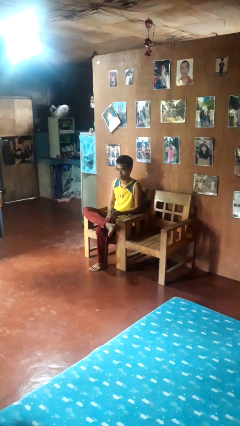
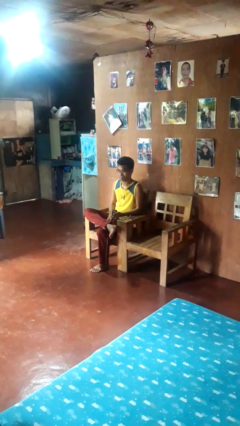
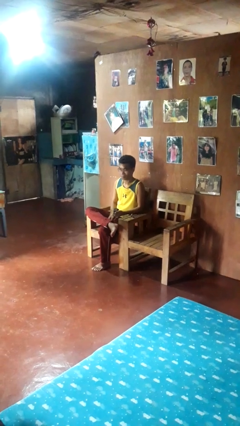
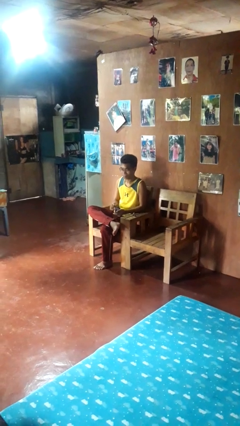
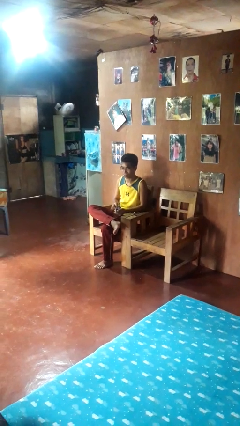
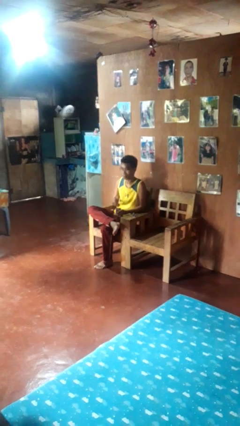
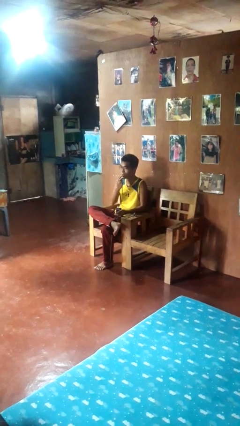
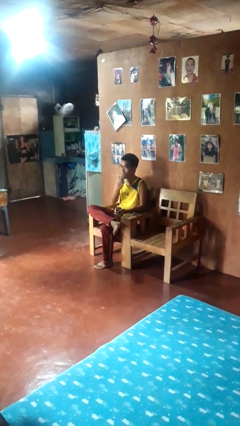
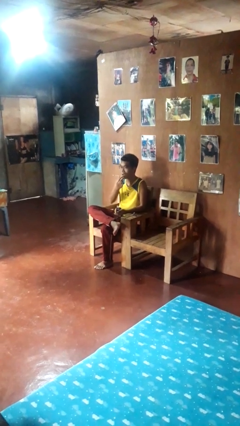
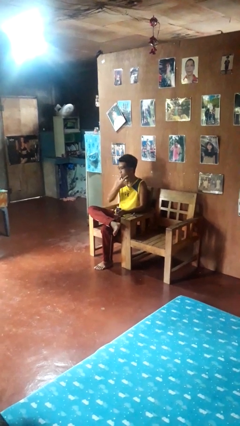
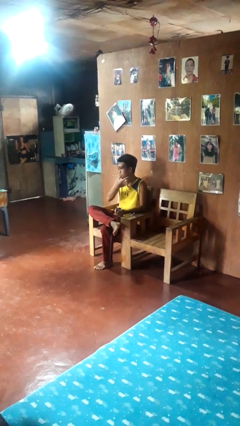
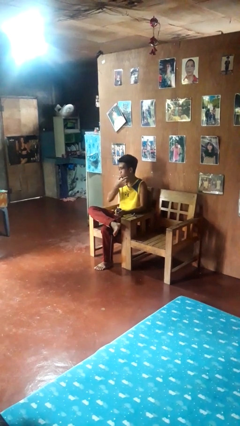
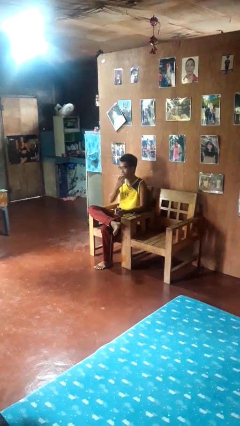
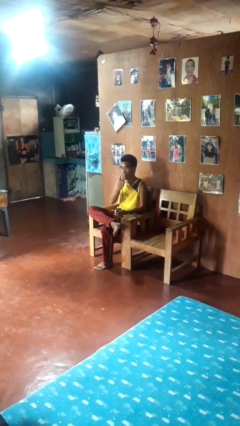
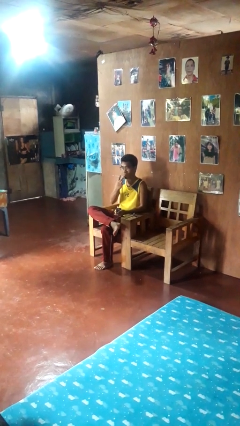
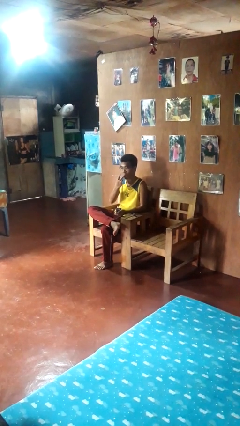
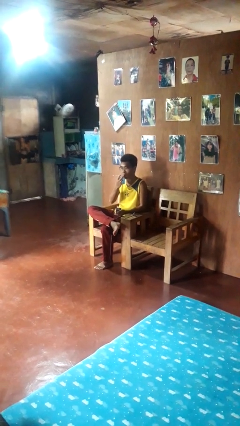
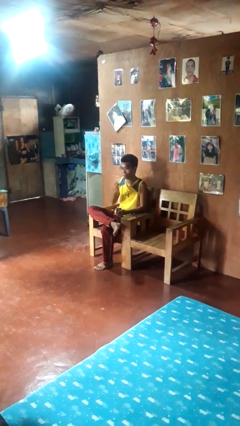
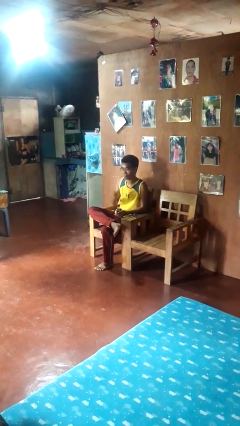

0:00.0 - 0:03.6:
person licks fingers

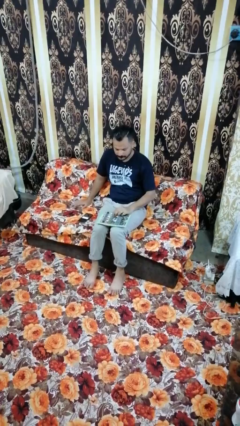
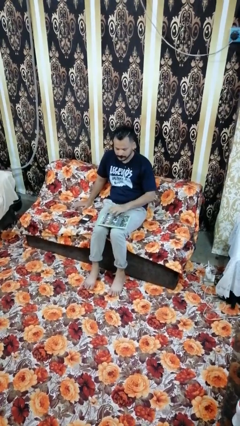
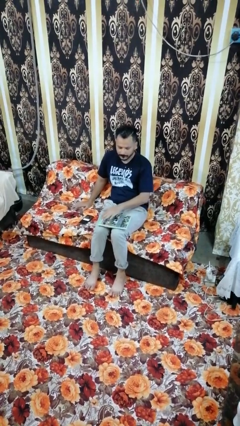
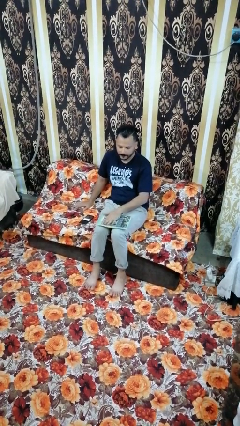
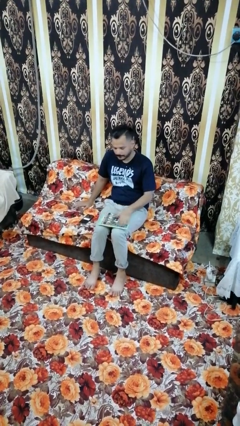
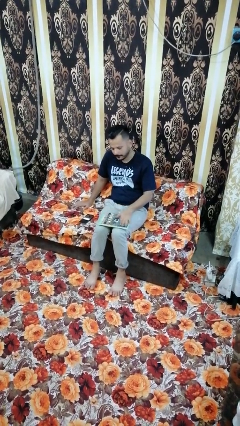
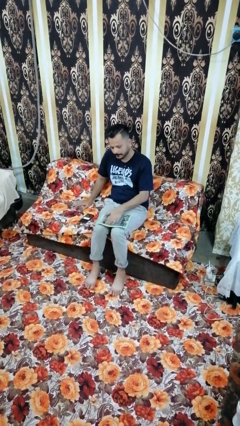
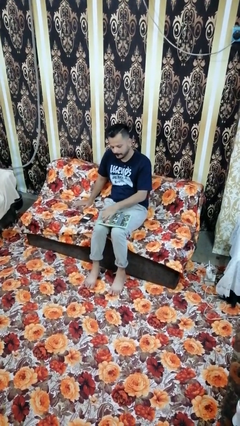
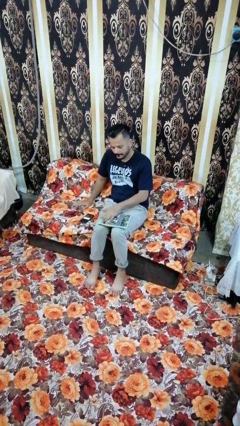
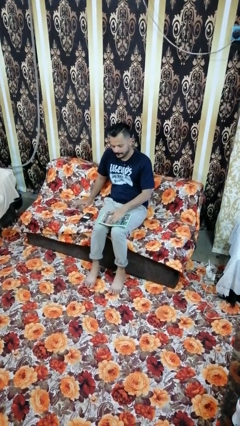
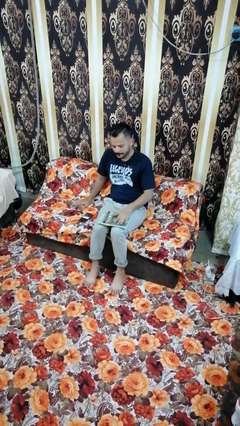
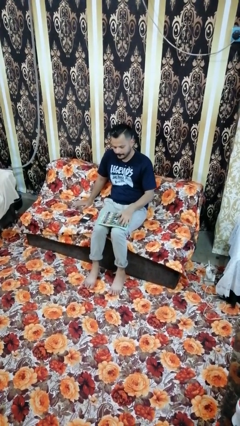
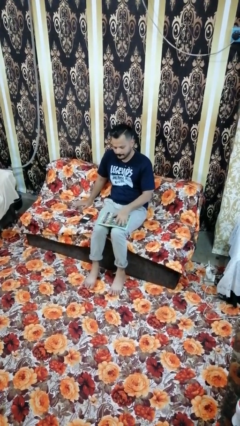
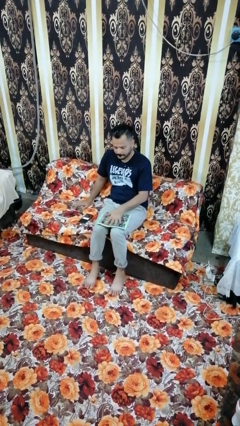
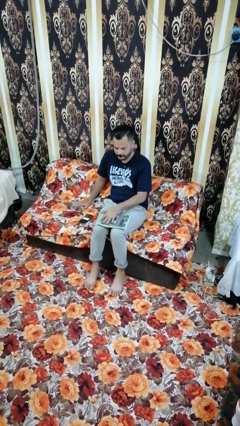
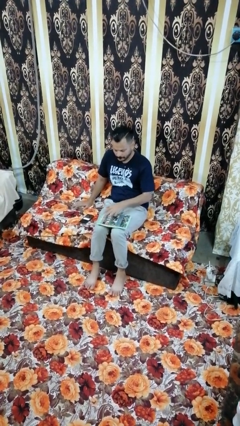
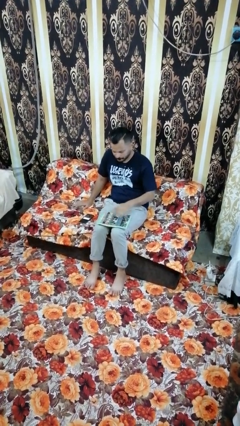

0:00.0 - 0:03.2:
person waves hand over object

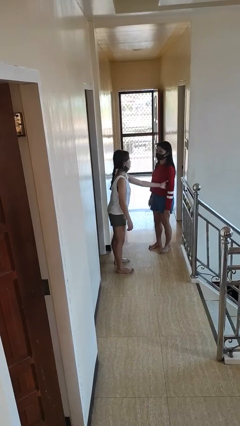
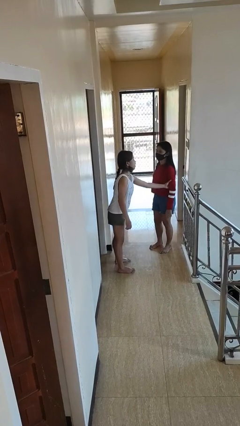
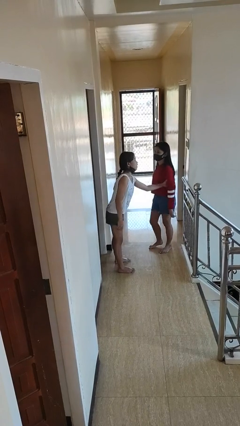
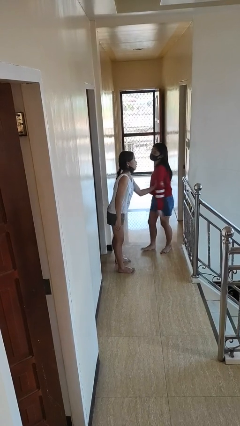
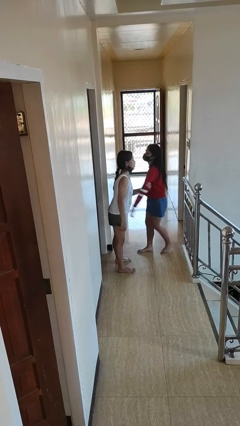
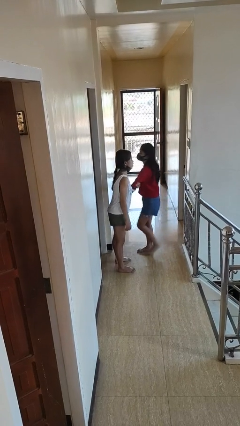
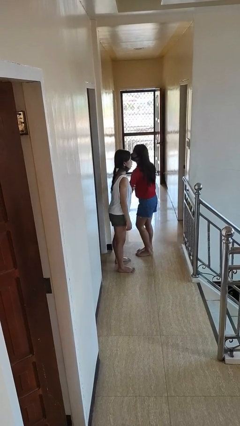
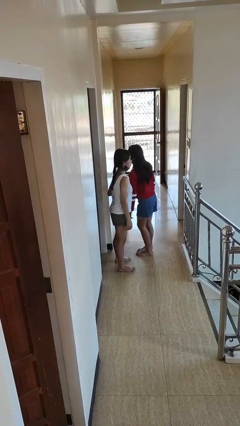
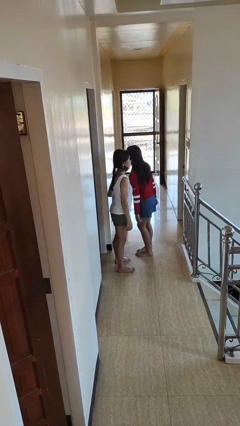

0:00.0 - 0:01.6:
person grabs person by bicep

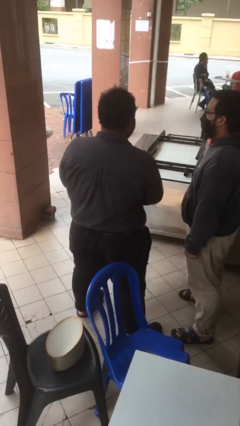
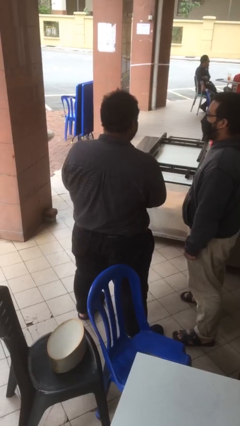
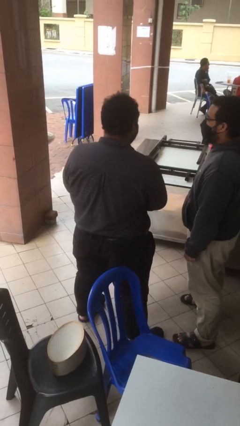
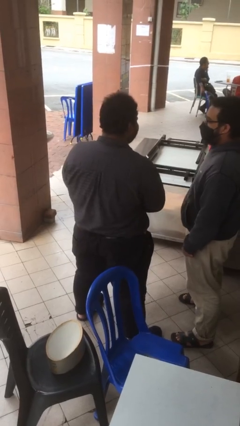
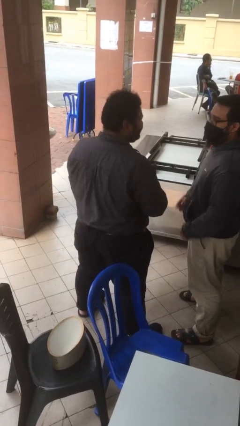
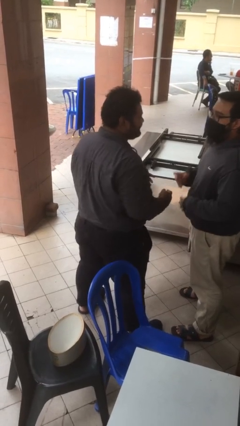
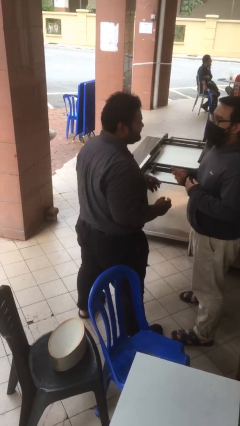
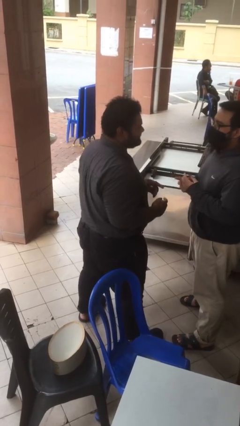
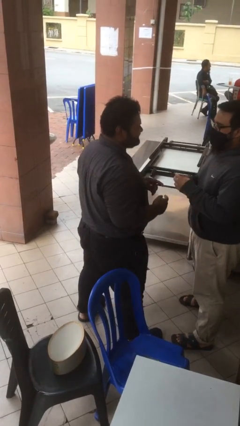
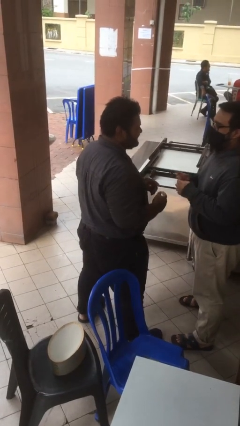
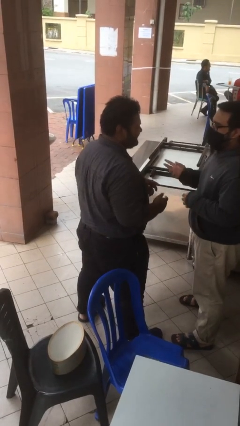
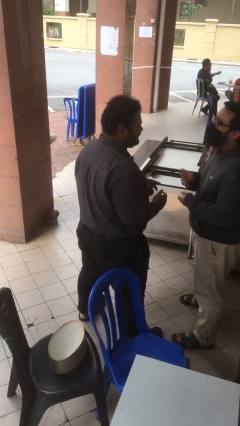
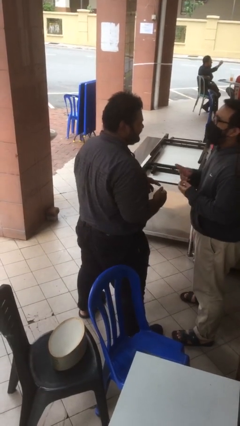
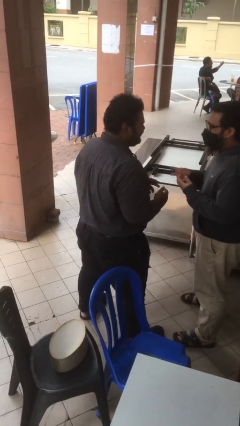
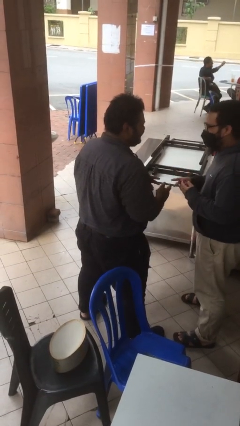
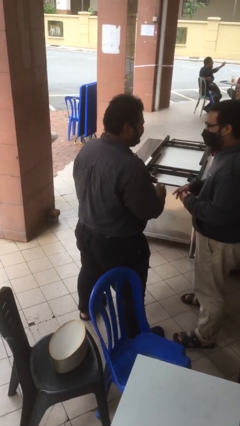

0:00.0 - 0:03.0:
person talks to person

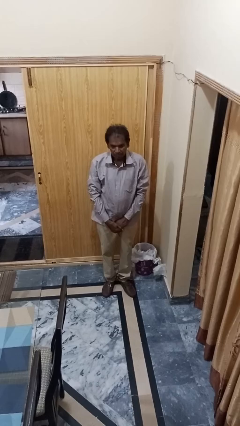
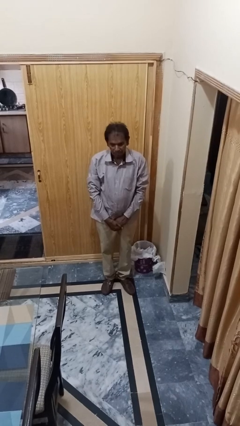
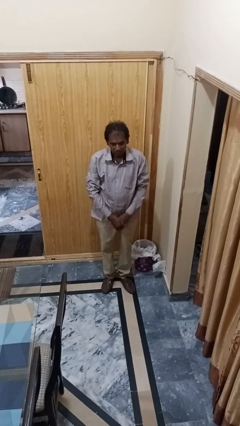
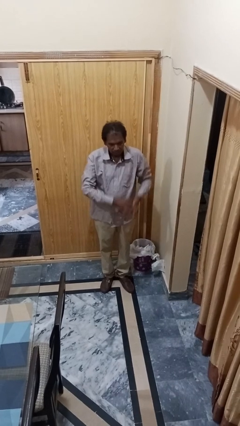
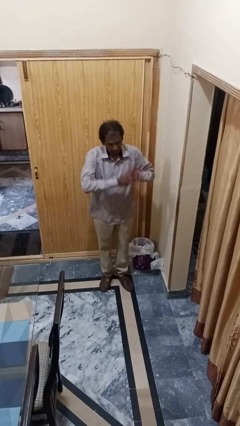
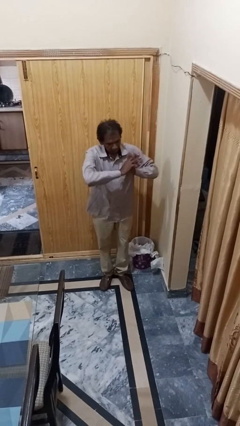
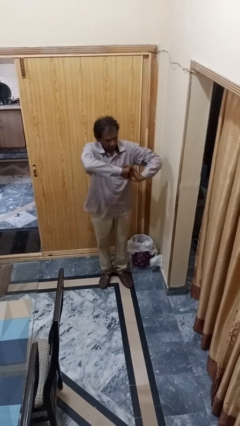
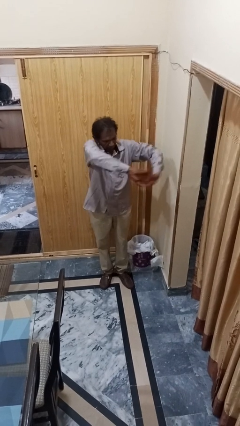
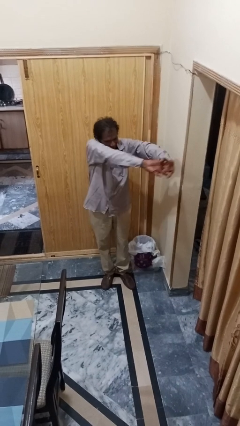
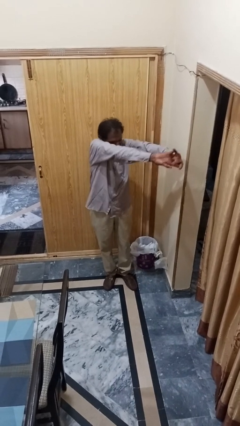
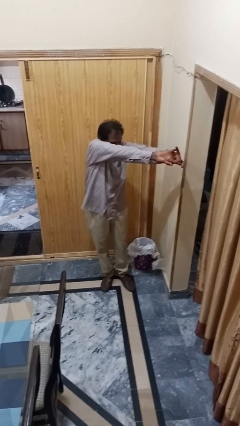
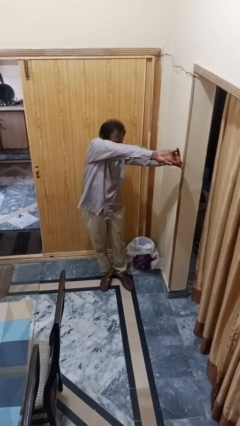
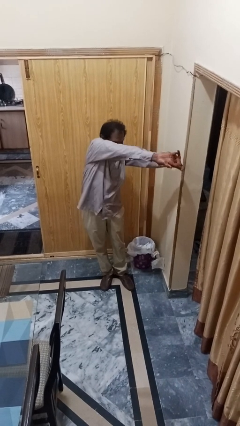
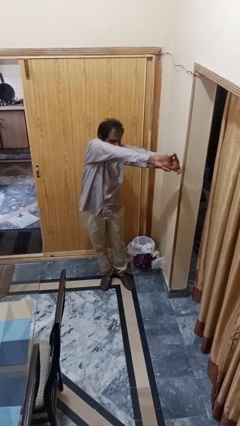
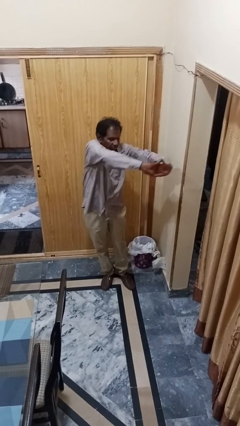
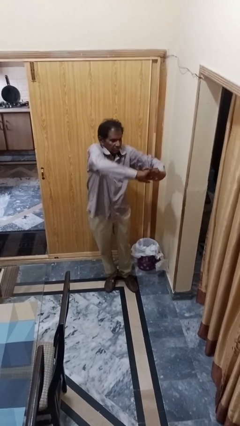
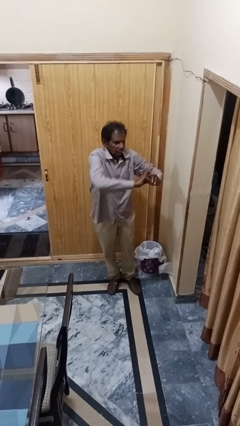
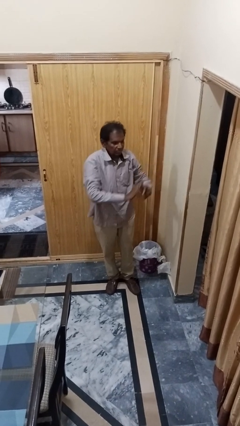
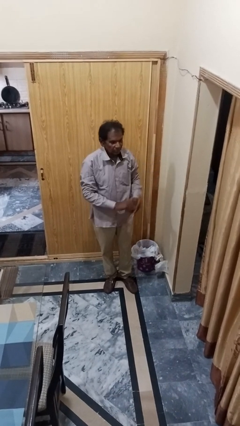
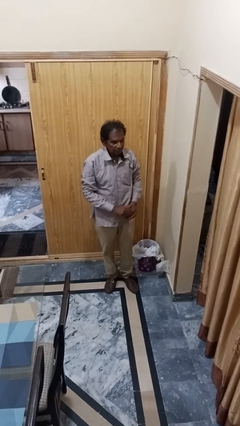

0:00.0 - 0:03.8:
person cracks knuckles

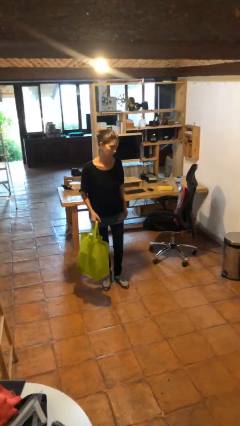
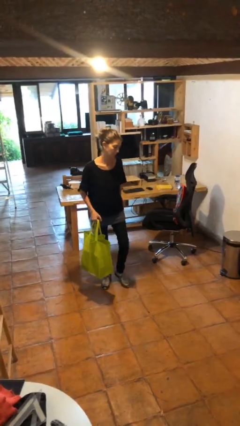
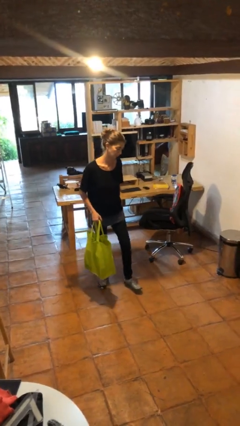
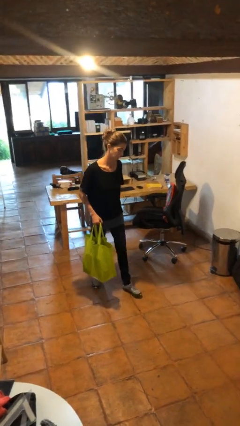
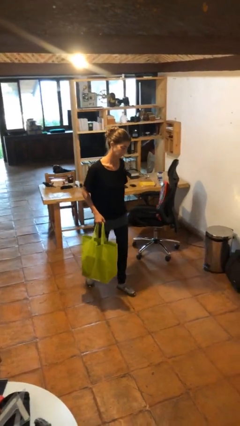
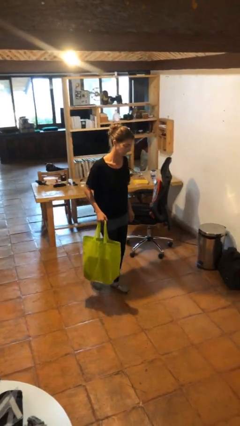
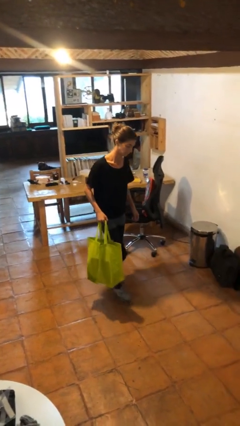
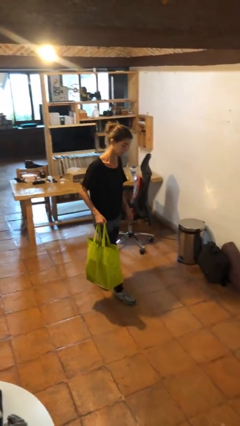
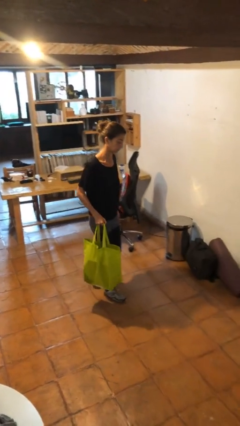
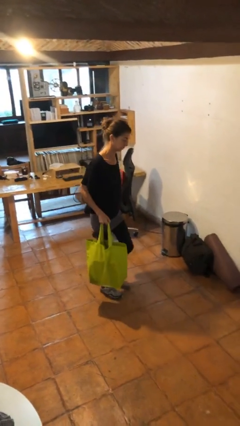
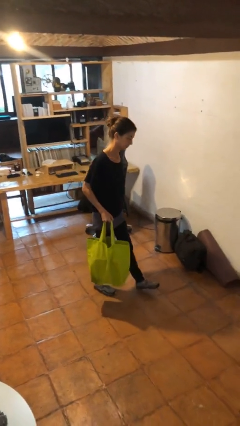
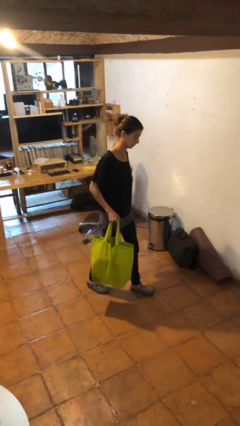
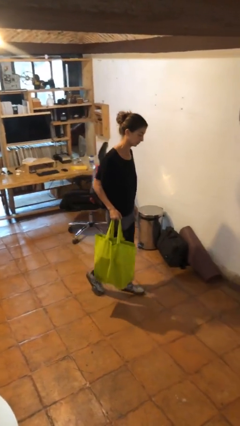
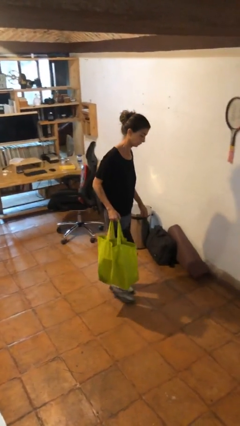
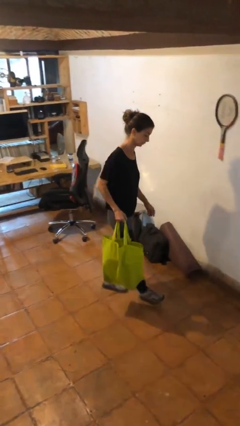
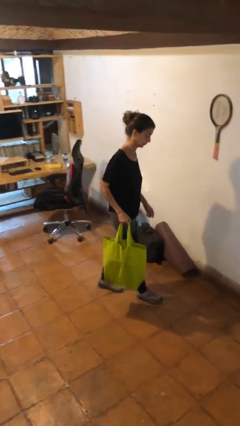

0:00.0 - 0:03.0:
person carries groceries
